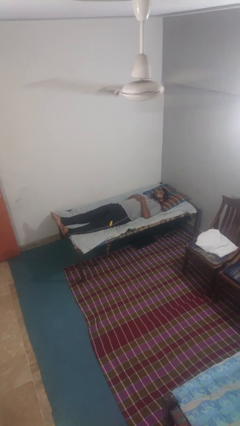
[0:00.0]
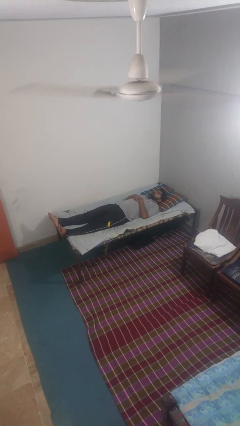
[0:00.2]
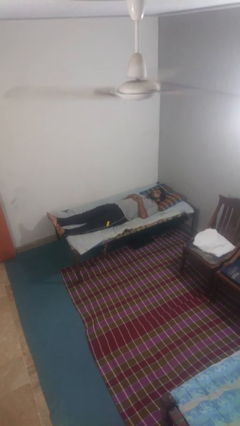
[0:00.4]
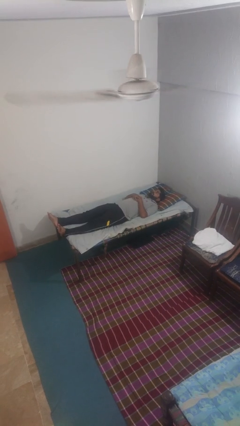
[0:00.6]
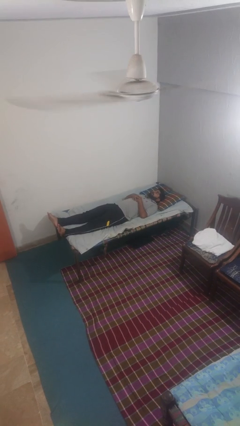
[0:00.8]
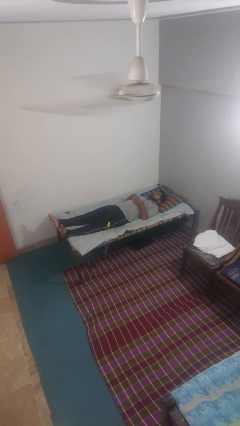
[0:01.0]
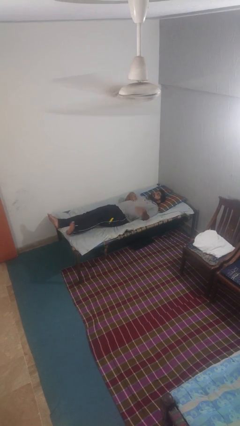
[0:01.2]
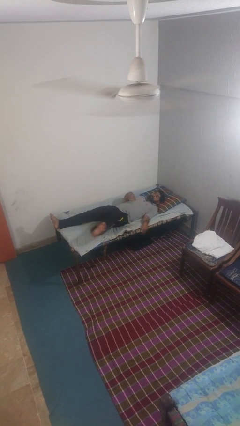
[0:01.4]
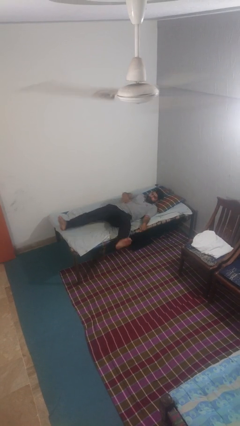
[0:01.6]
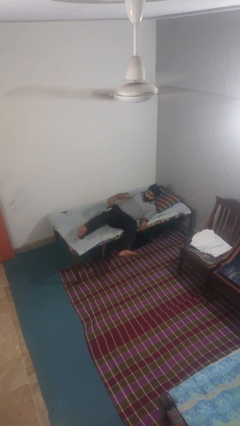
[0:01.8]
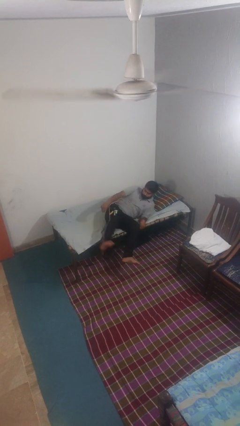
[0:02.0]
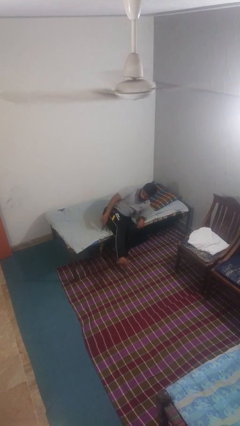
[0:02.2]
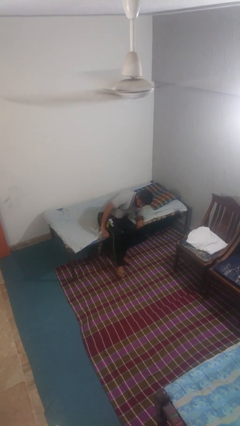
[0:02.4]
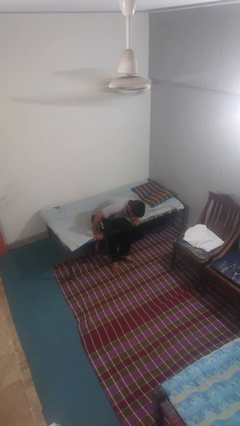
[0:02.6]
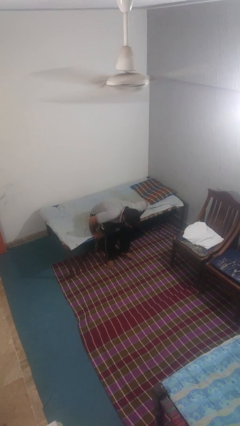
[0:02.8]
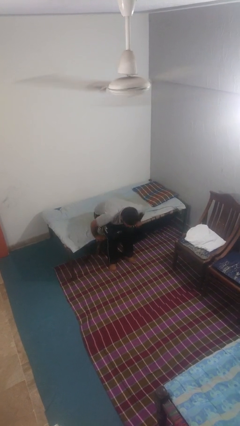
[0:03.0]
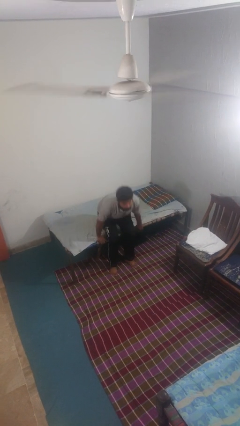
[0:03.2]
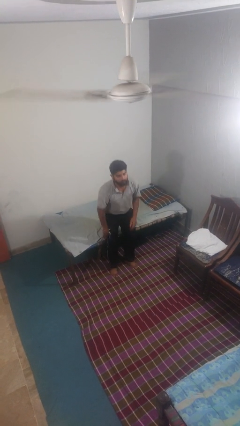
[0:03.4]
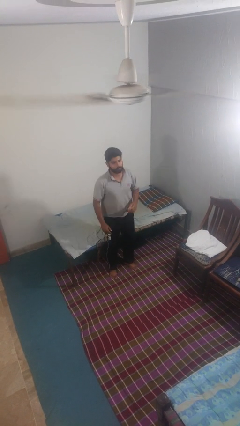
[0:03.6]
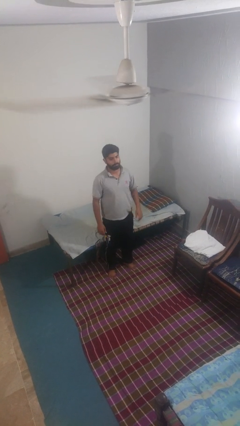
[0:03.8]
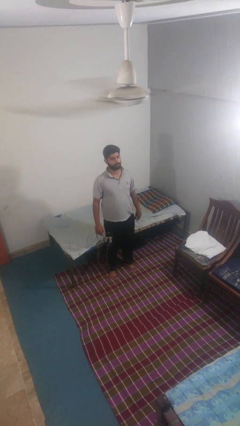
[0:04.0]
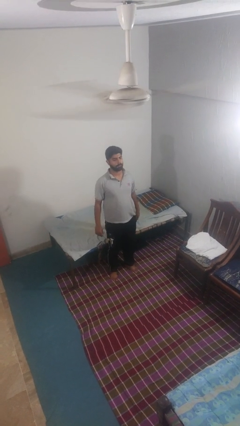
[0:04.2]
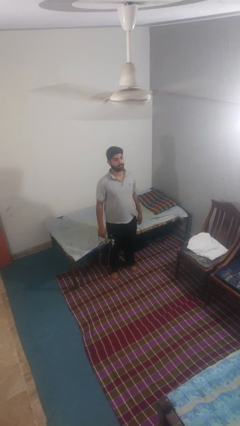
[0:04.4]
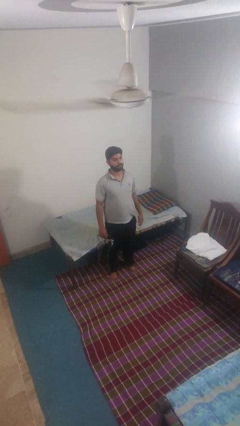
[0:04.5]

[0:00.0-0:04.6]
person stands up

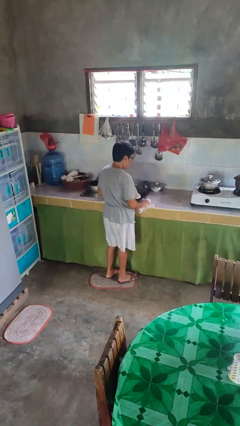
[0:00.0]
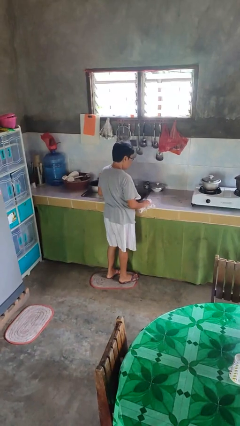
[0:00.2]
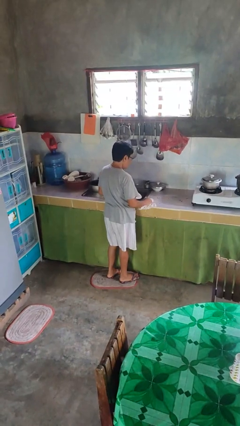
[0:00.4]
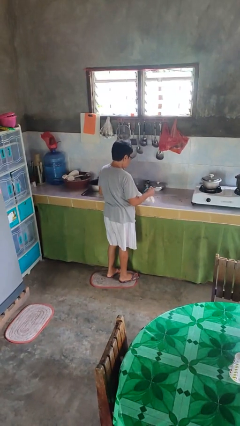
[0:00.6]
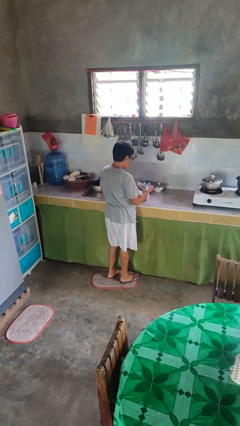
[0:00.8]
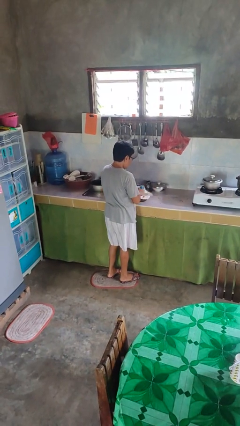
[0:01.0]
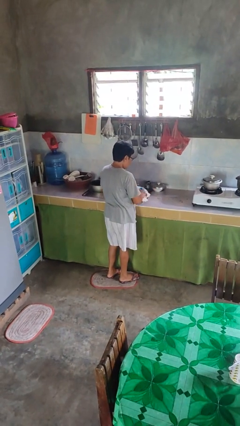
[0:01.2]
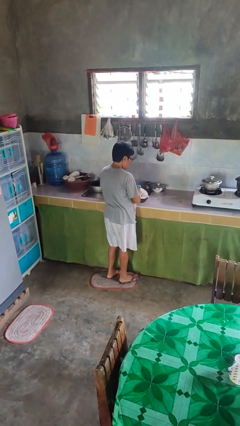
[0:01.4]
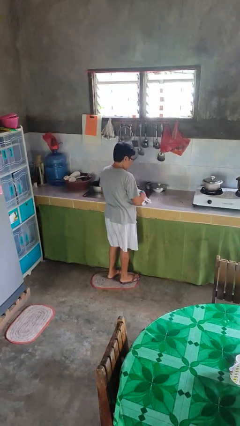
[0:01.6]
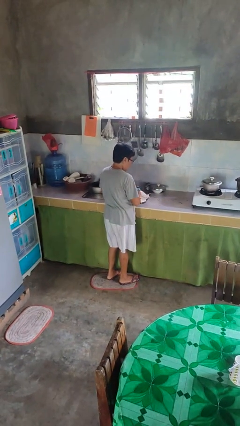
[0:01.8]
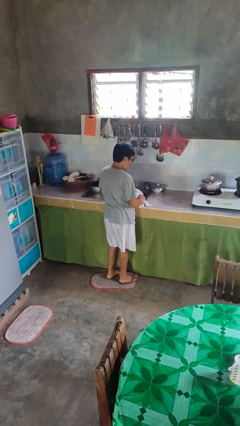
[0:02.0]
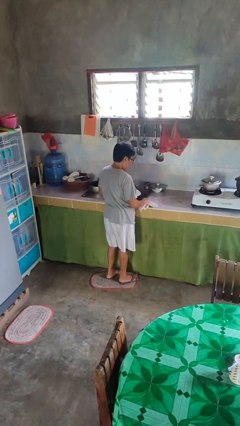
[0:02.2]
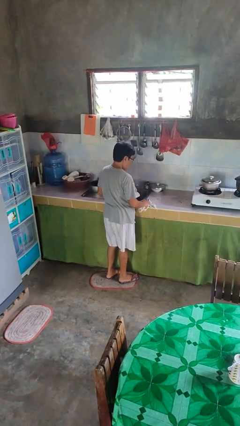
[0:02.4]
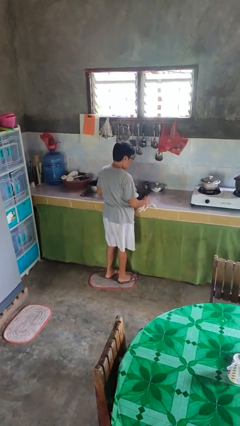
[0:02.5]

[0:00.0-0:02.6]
person dries dish

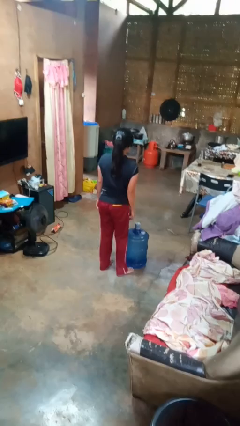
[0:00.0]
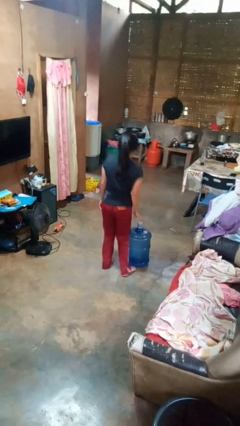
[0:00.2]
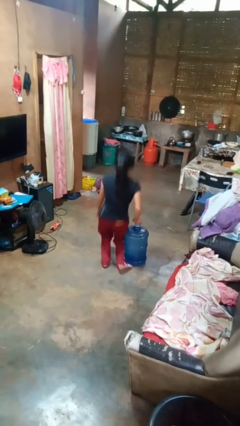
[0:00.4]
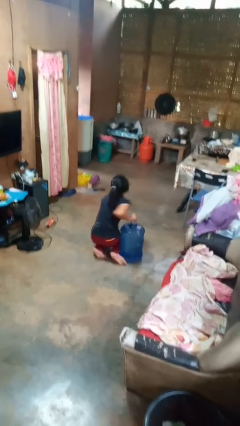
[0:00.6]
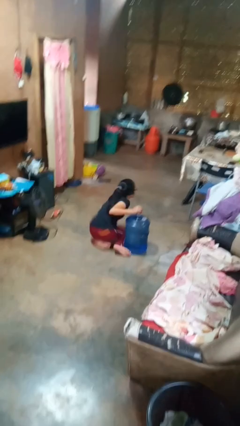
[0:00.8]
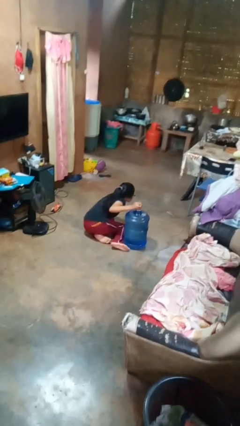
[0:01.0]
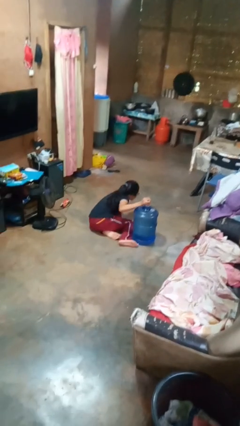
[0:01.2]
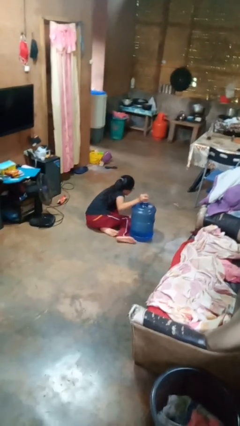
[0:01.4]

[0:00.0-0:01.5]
person trips on object on floor

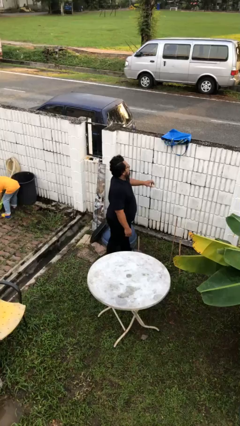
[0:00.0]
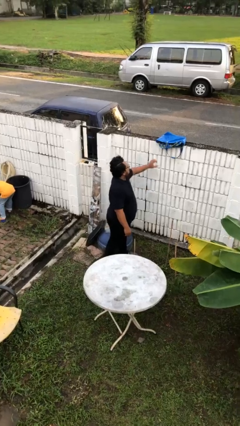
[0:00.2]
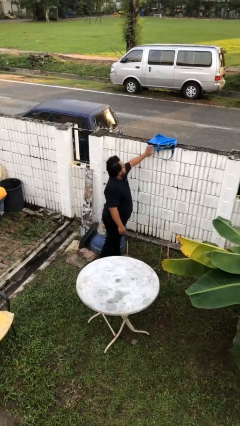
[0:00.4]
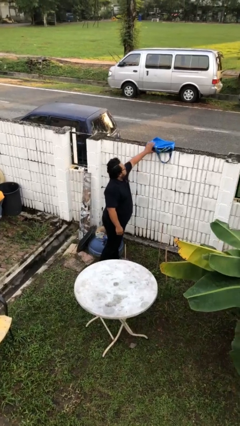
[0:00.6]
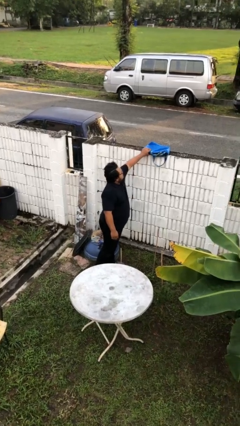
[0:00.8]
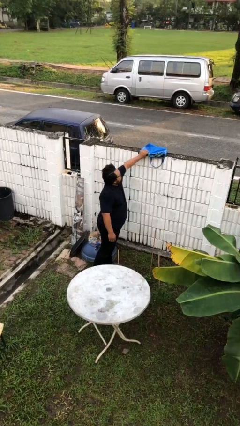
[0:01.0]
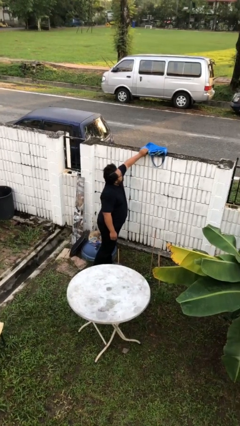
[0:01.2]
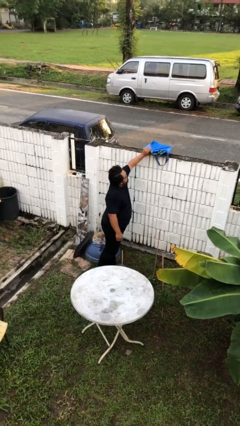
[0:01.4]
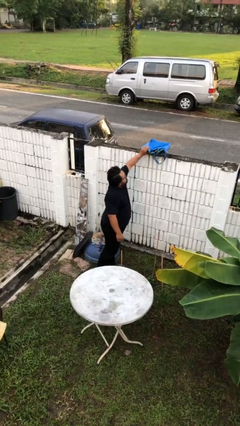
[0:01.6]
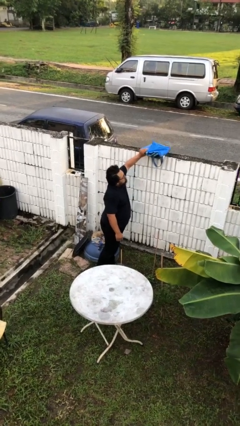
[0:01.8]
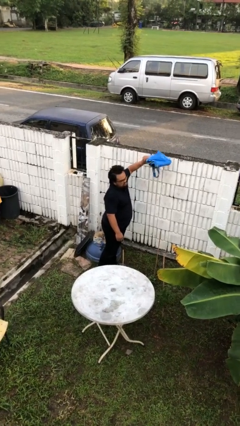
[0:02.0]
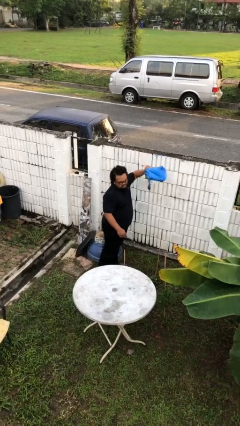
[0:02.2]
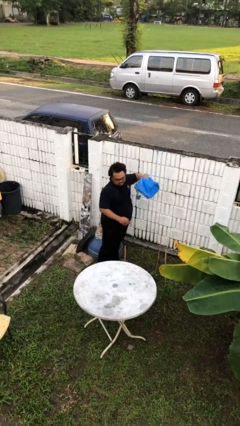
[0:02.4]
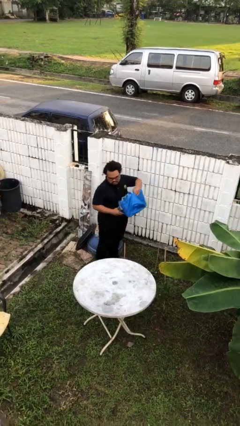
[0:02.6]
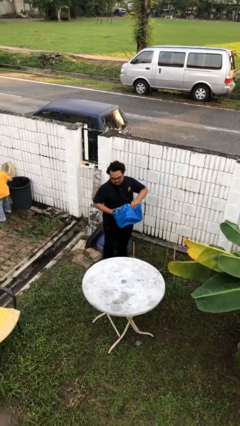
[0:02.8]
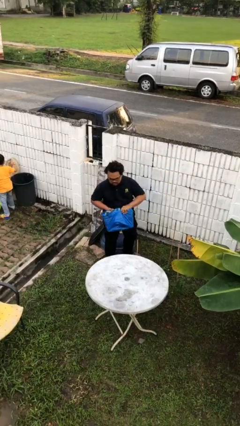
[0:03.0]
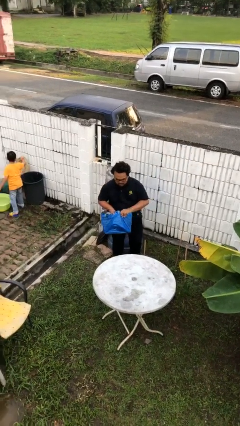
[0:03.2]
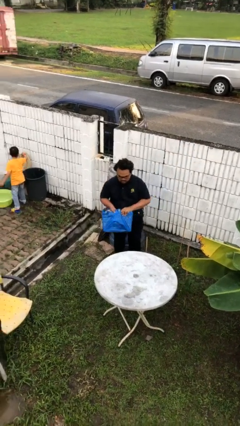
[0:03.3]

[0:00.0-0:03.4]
person picks up object from shelf

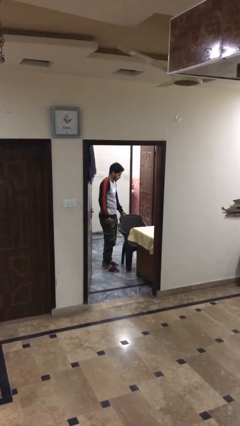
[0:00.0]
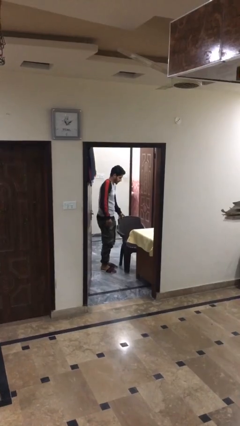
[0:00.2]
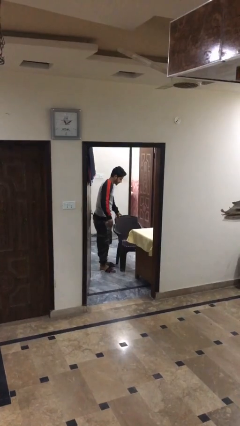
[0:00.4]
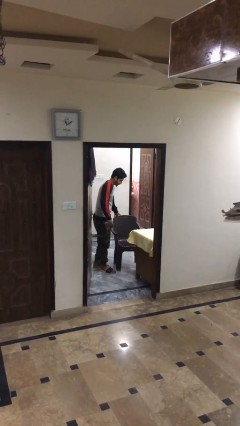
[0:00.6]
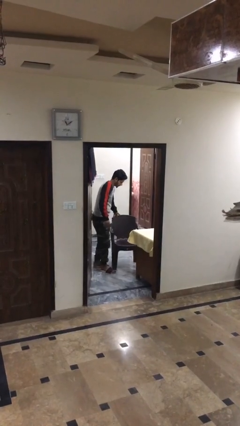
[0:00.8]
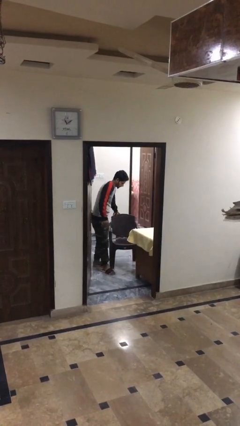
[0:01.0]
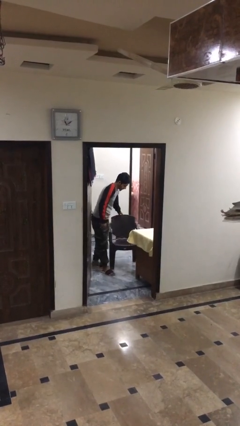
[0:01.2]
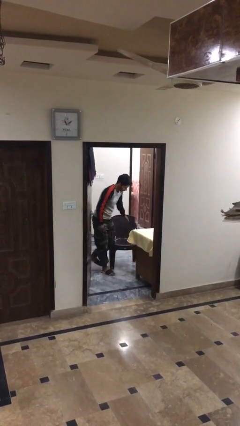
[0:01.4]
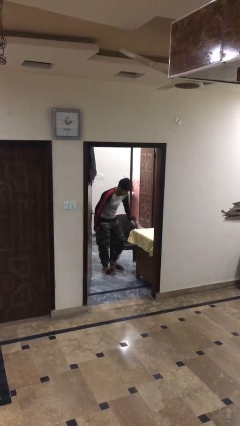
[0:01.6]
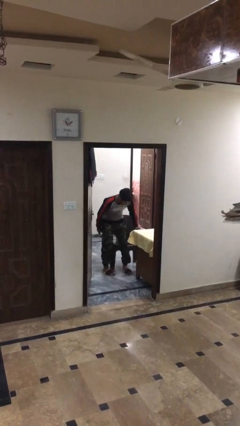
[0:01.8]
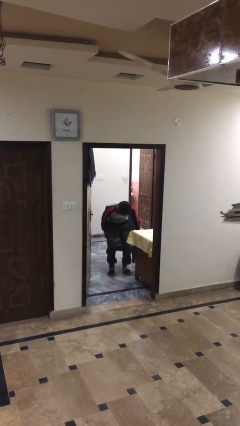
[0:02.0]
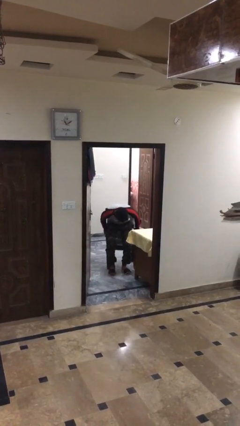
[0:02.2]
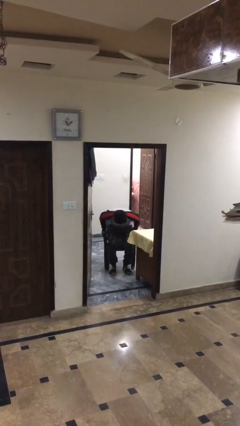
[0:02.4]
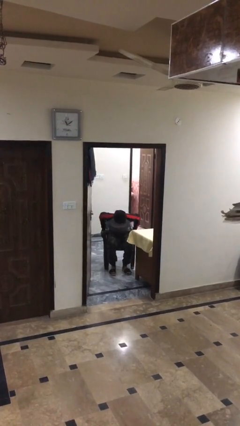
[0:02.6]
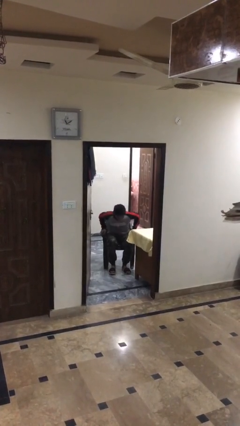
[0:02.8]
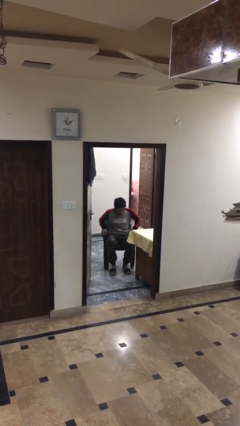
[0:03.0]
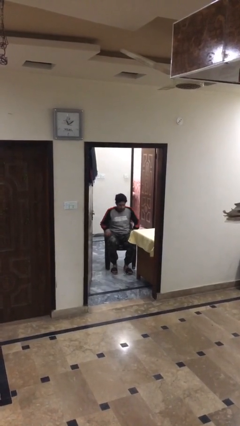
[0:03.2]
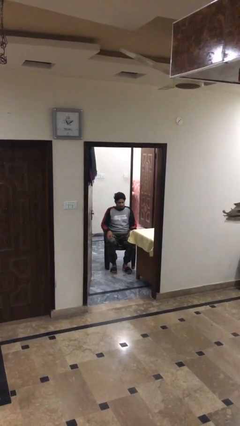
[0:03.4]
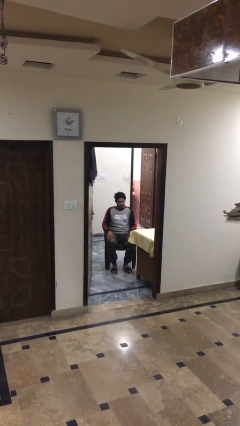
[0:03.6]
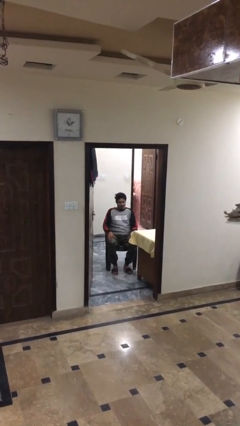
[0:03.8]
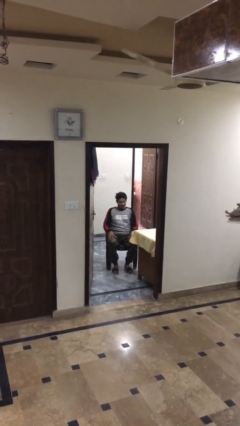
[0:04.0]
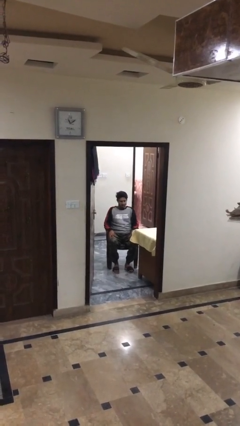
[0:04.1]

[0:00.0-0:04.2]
person sits down

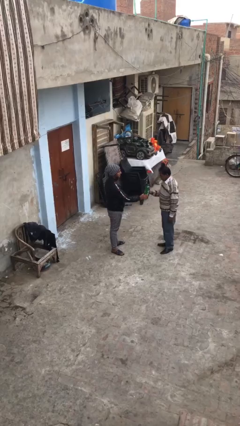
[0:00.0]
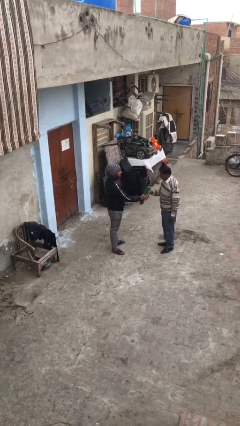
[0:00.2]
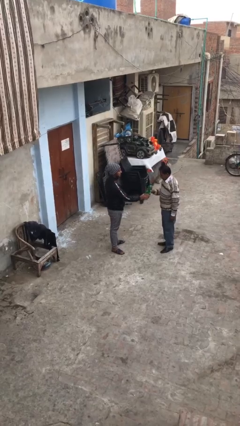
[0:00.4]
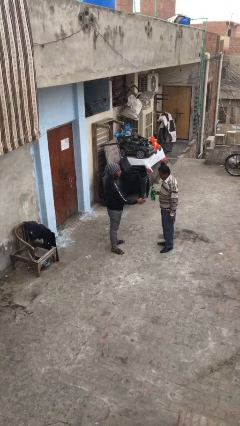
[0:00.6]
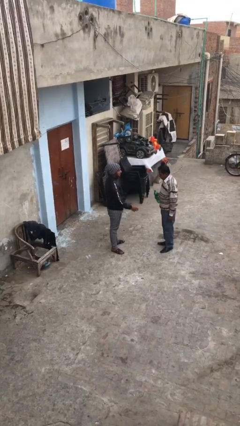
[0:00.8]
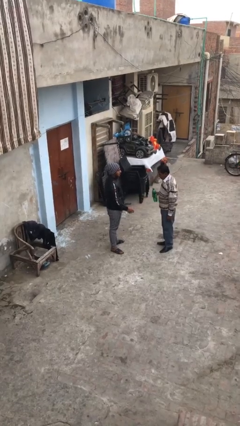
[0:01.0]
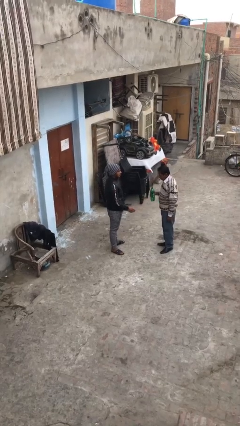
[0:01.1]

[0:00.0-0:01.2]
person transfers object to person

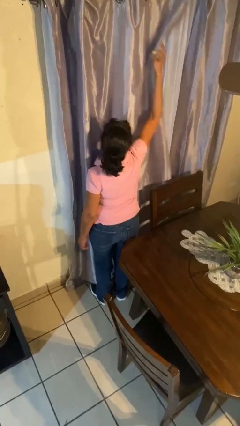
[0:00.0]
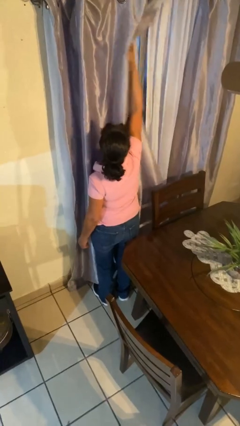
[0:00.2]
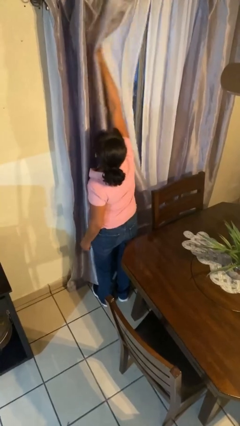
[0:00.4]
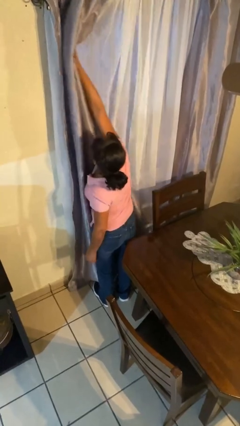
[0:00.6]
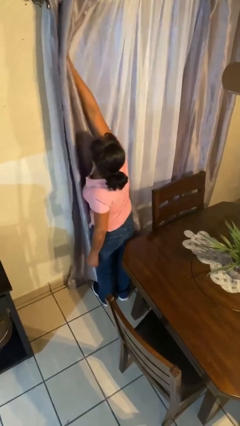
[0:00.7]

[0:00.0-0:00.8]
person opens curtains
